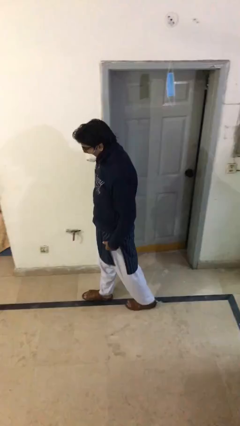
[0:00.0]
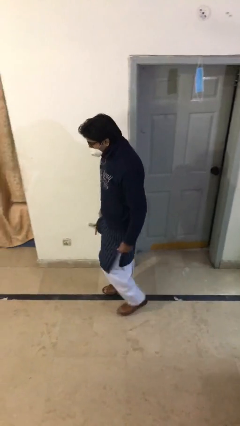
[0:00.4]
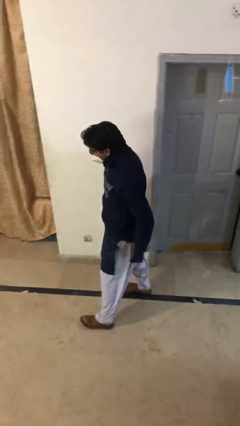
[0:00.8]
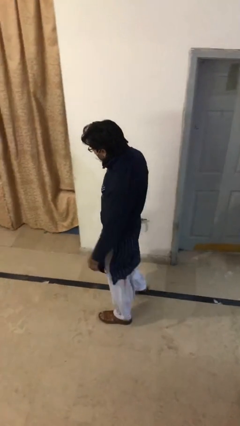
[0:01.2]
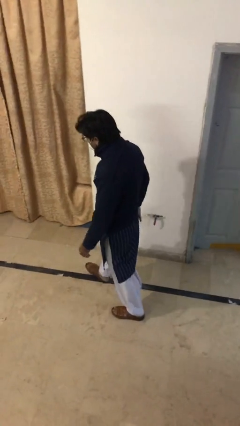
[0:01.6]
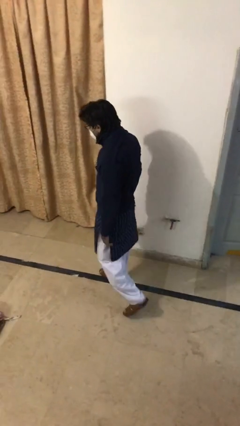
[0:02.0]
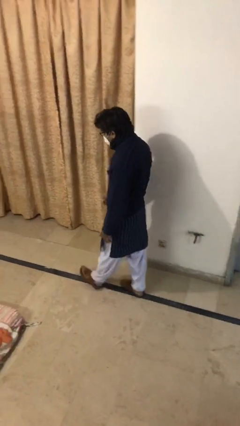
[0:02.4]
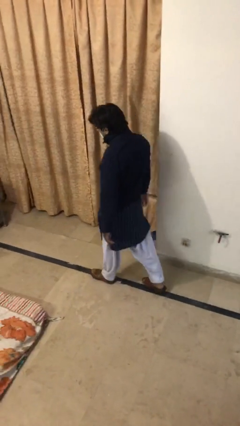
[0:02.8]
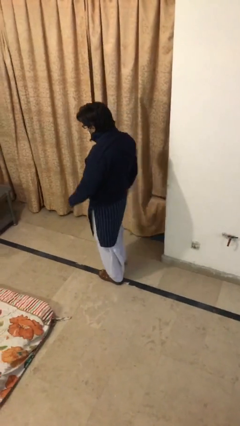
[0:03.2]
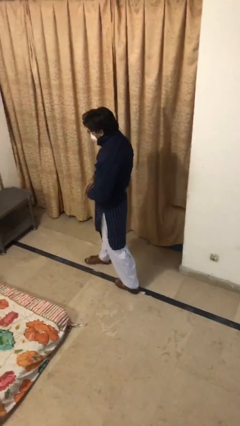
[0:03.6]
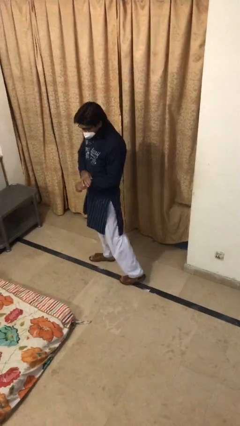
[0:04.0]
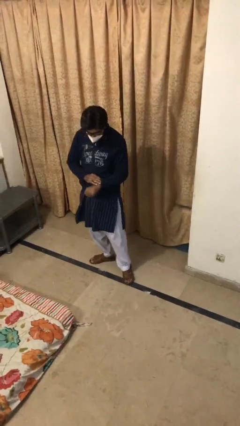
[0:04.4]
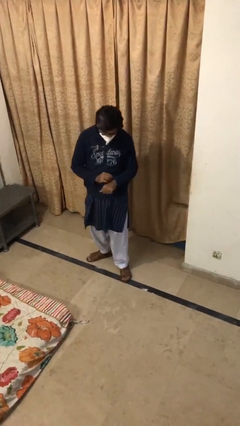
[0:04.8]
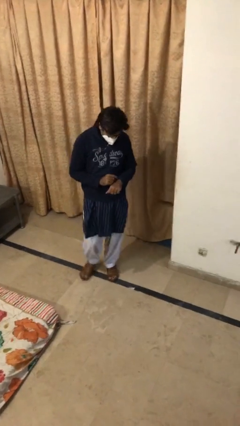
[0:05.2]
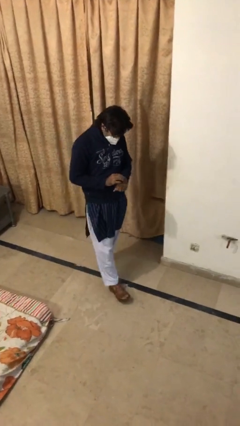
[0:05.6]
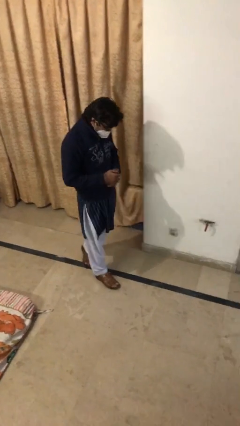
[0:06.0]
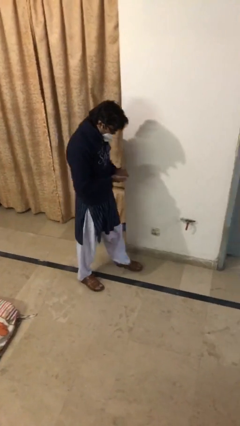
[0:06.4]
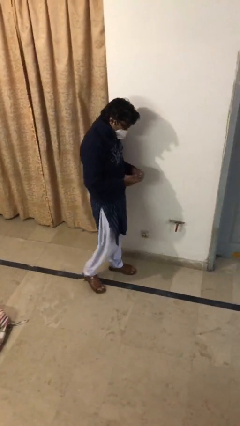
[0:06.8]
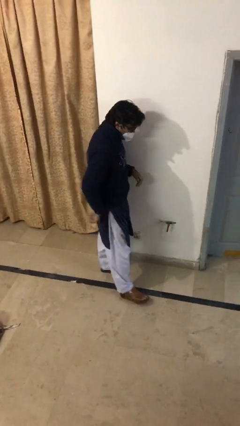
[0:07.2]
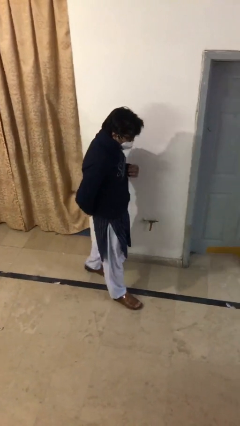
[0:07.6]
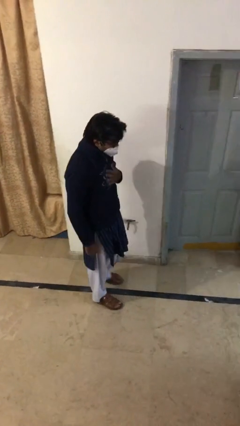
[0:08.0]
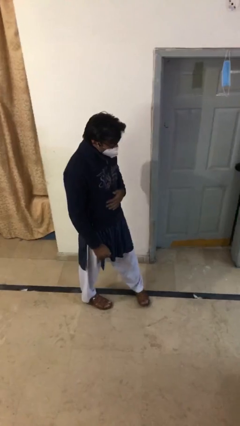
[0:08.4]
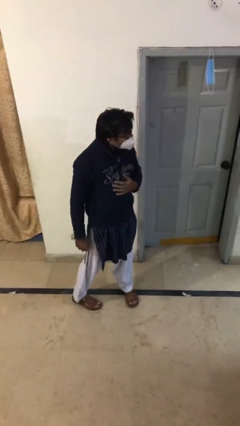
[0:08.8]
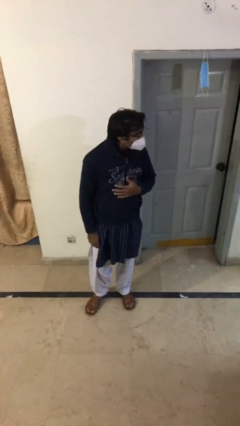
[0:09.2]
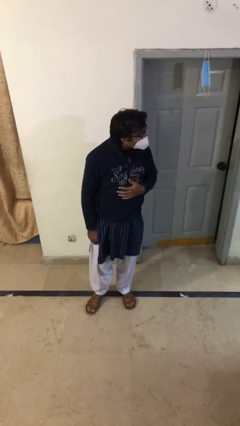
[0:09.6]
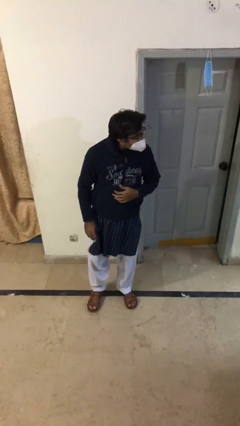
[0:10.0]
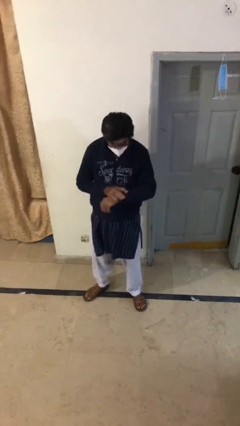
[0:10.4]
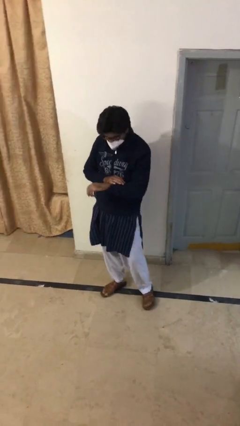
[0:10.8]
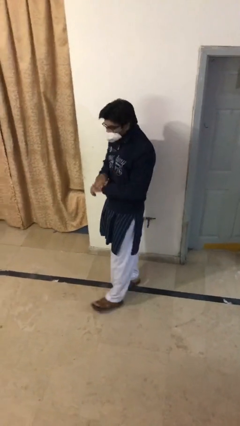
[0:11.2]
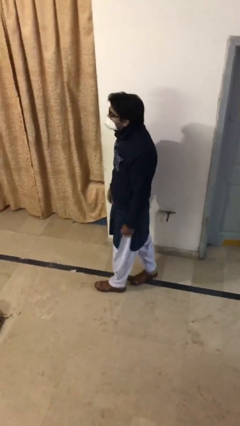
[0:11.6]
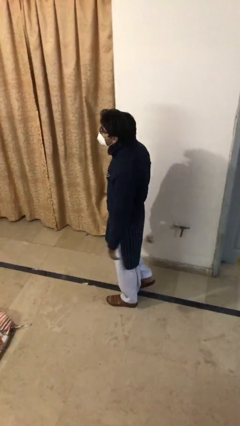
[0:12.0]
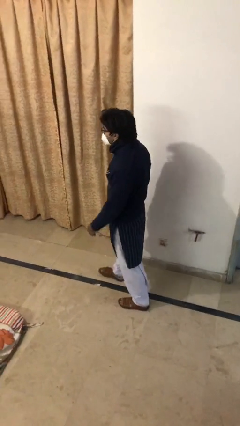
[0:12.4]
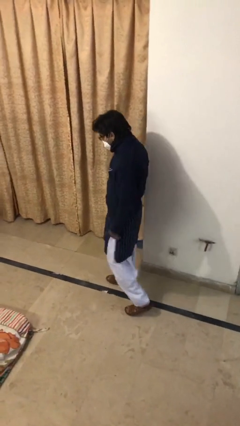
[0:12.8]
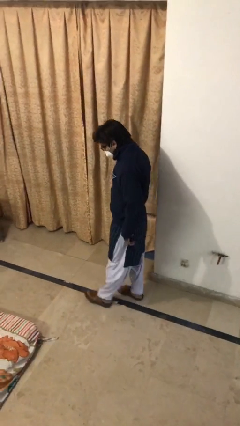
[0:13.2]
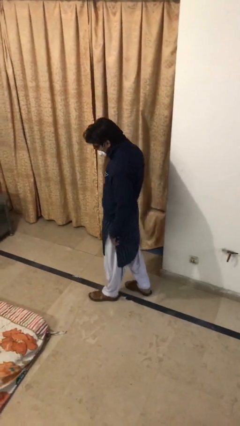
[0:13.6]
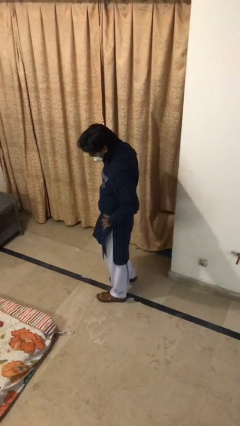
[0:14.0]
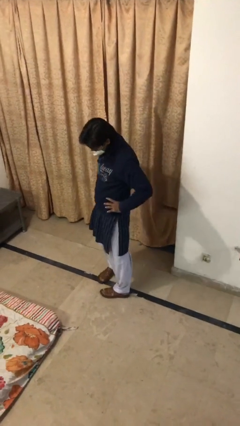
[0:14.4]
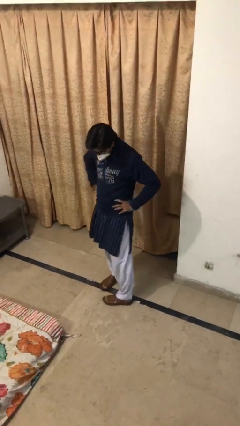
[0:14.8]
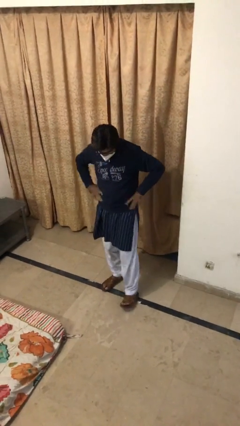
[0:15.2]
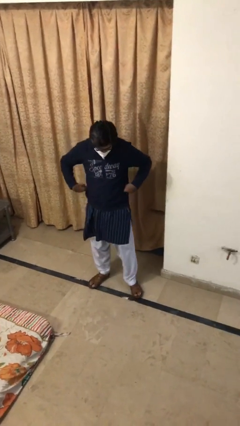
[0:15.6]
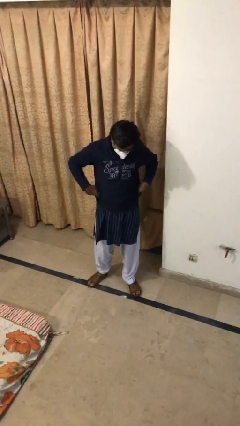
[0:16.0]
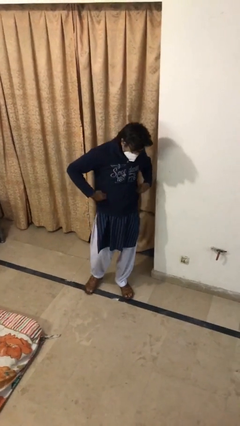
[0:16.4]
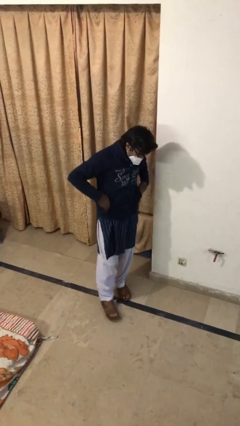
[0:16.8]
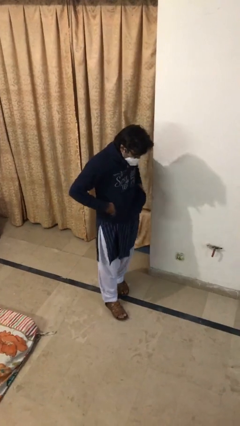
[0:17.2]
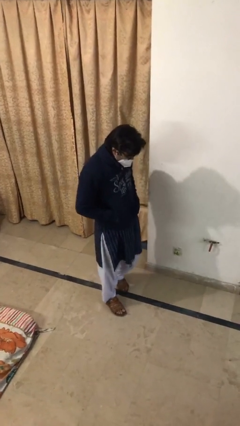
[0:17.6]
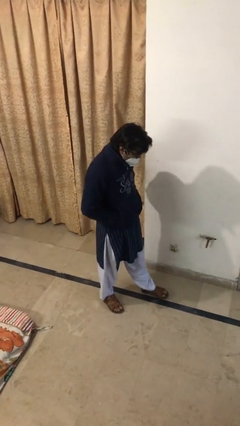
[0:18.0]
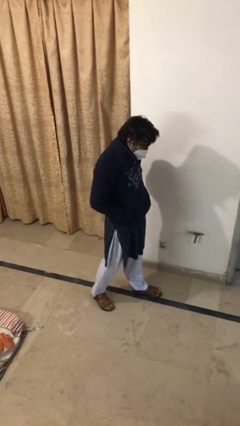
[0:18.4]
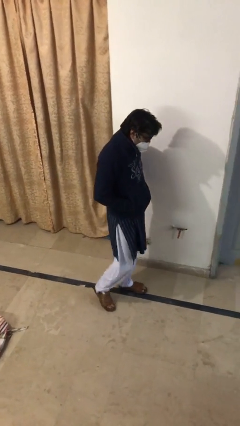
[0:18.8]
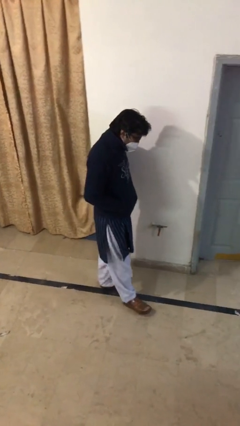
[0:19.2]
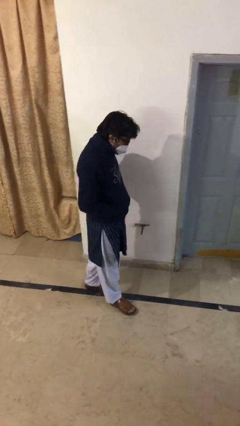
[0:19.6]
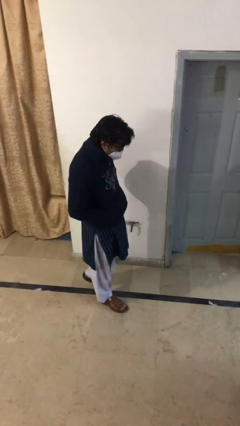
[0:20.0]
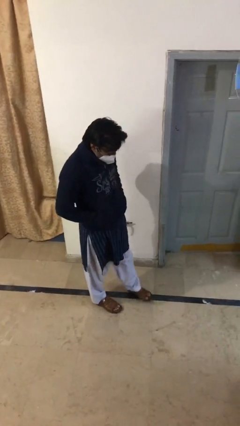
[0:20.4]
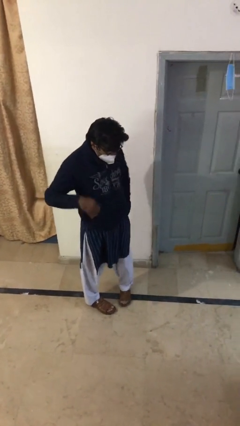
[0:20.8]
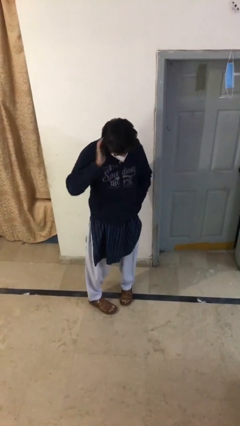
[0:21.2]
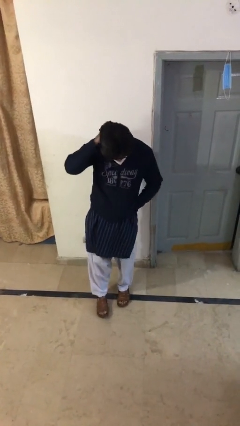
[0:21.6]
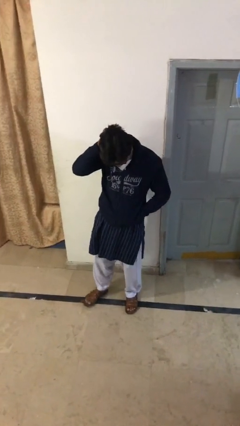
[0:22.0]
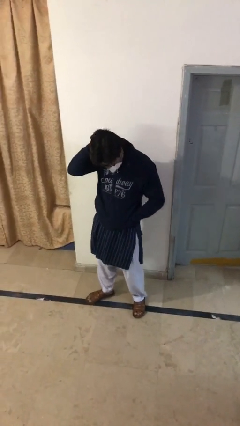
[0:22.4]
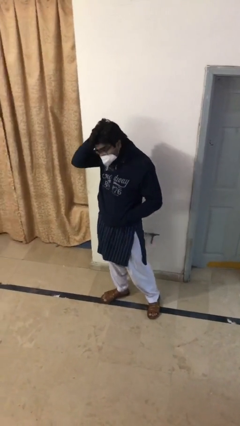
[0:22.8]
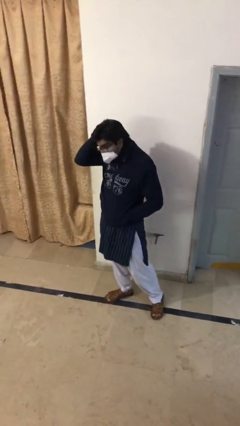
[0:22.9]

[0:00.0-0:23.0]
person walks

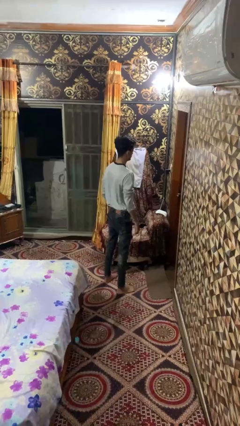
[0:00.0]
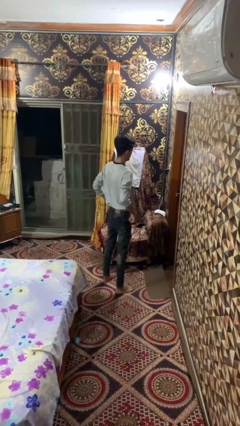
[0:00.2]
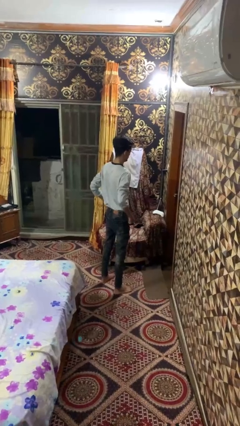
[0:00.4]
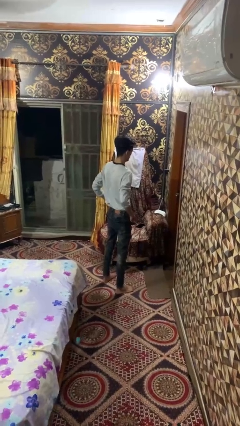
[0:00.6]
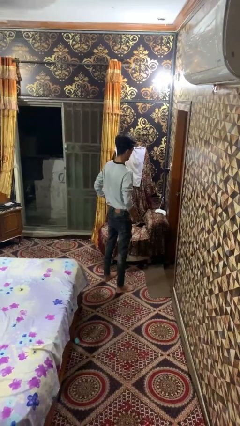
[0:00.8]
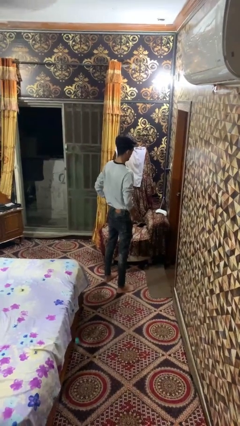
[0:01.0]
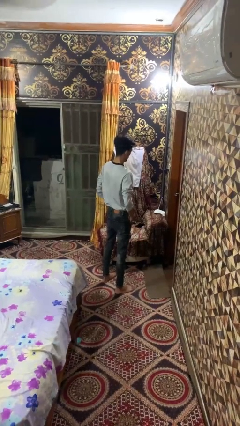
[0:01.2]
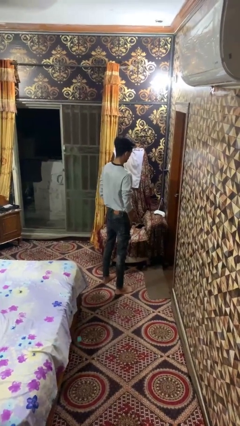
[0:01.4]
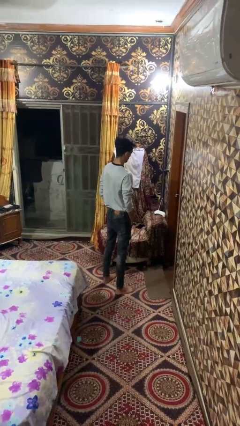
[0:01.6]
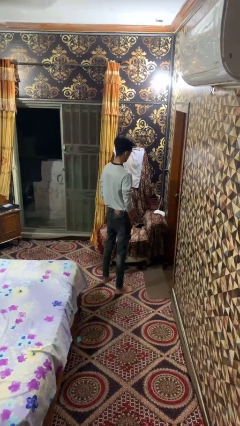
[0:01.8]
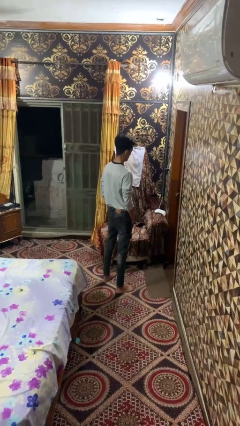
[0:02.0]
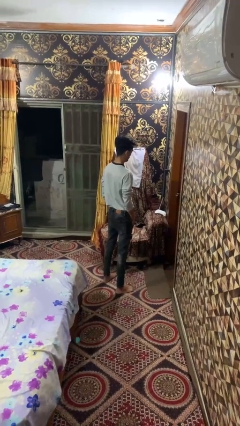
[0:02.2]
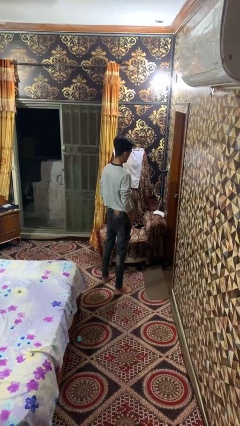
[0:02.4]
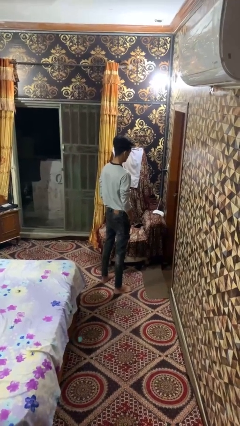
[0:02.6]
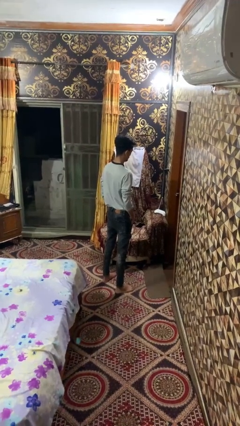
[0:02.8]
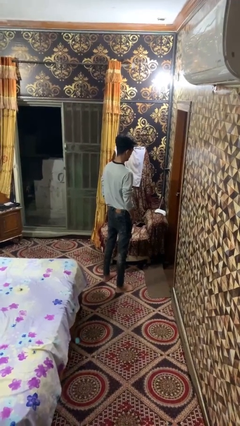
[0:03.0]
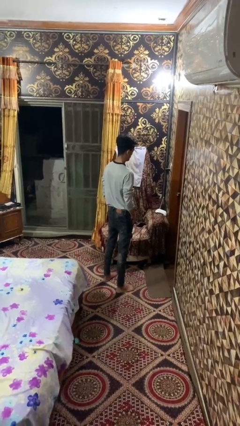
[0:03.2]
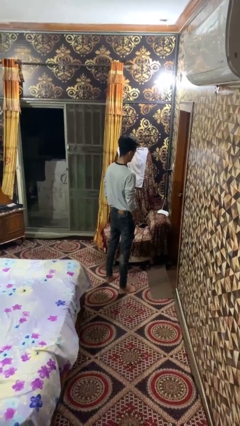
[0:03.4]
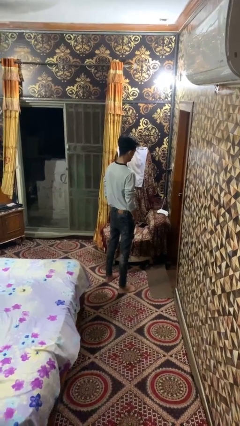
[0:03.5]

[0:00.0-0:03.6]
person puts hands in back pockets

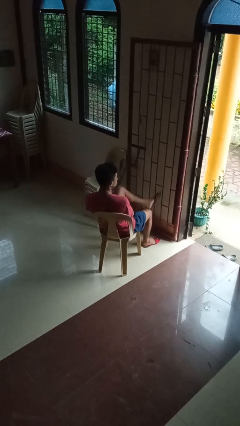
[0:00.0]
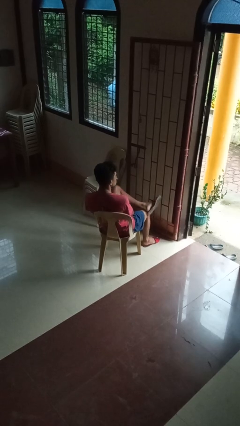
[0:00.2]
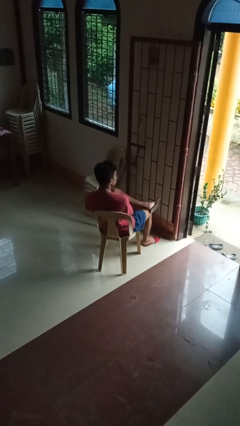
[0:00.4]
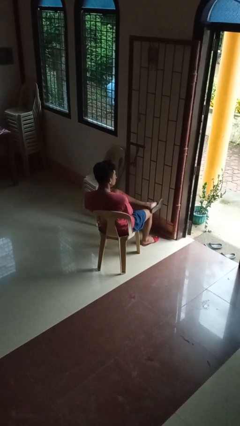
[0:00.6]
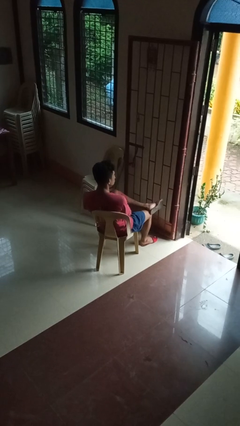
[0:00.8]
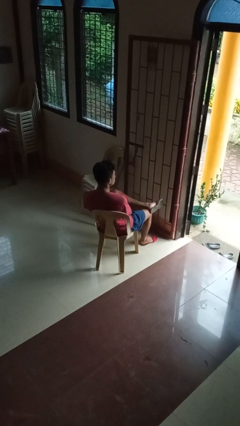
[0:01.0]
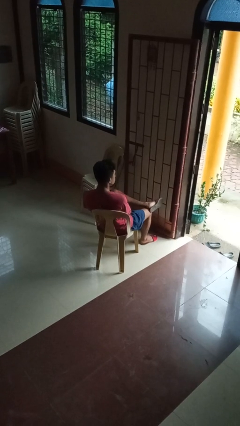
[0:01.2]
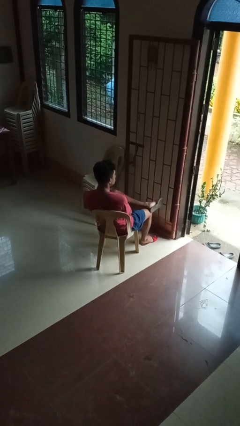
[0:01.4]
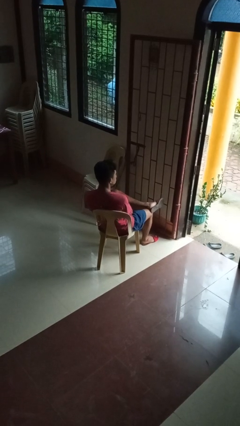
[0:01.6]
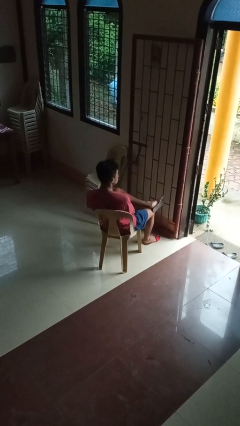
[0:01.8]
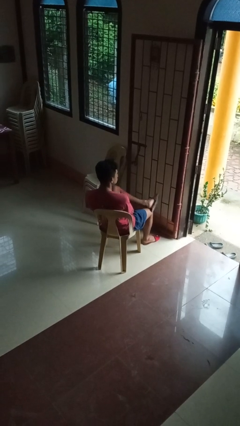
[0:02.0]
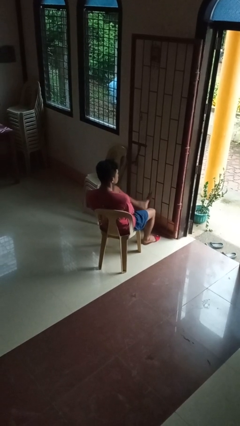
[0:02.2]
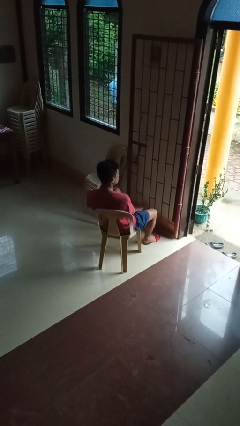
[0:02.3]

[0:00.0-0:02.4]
person crosses legs
